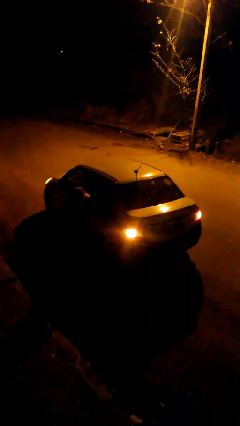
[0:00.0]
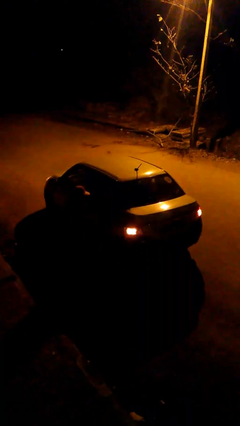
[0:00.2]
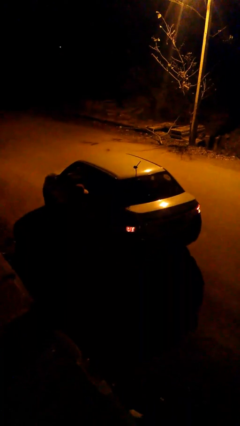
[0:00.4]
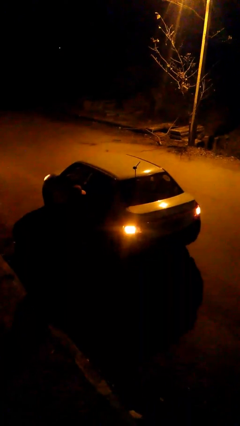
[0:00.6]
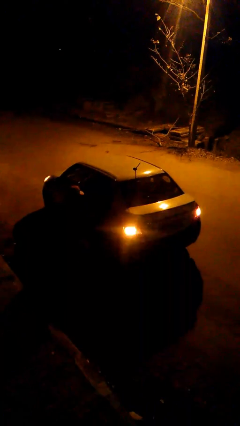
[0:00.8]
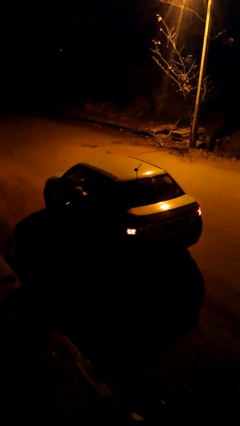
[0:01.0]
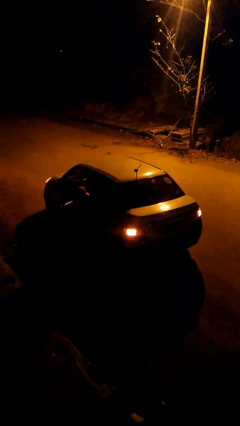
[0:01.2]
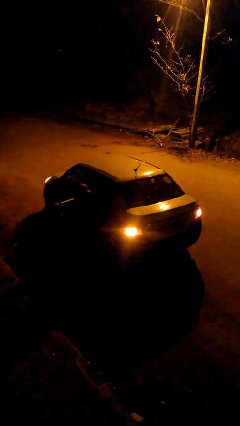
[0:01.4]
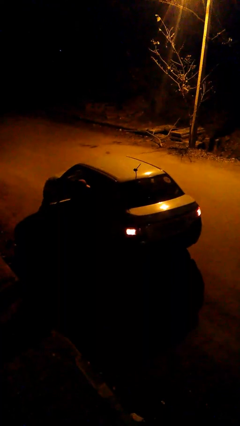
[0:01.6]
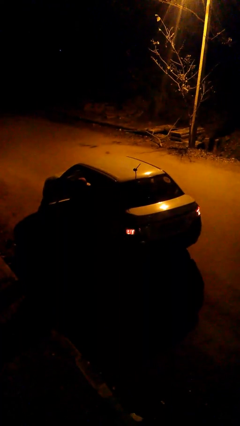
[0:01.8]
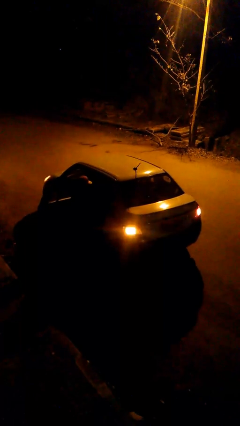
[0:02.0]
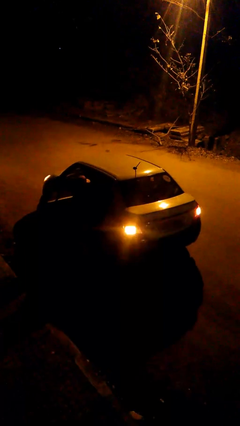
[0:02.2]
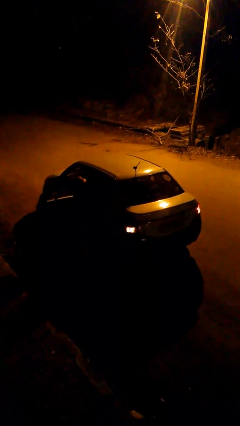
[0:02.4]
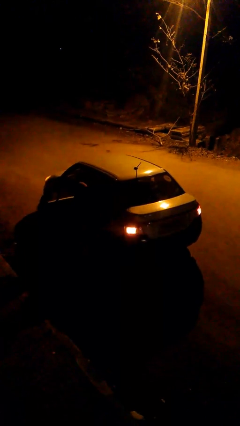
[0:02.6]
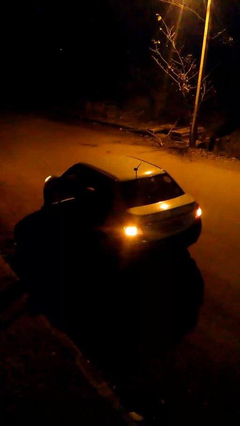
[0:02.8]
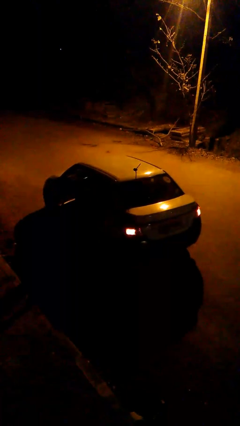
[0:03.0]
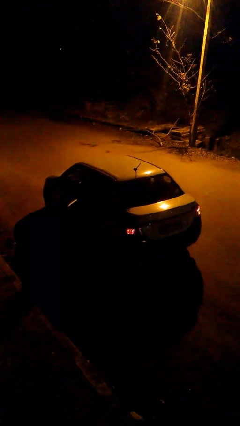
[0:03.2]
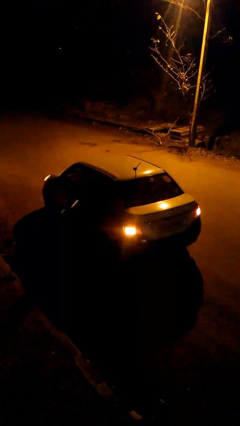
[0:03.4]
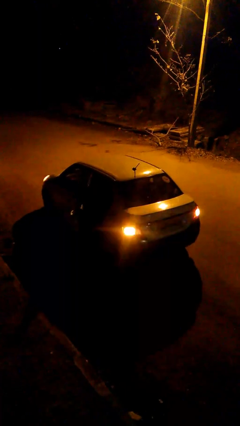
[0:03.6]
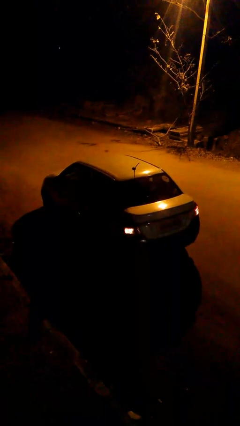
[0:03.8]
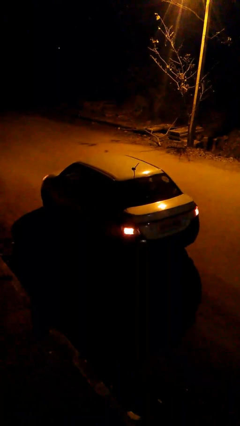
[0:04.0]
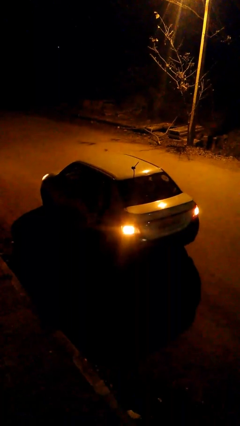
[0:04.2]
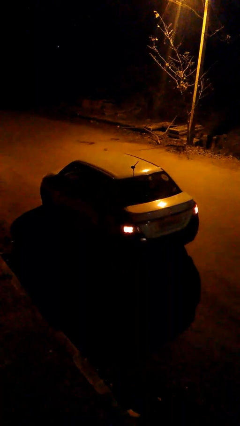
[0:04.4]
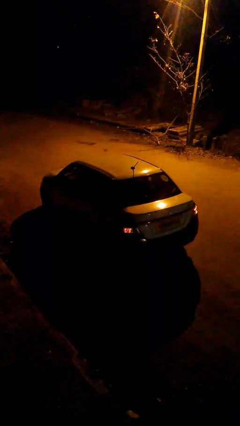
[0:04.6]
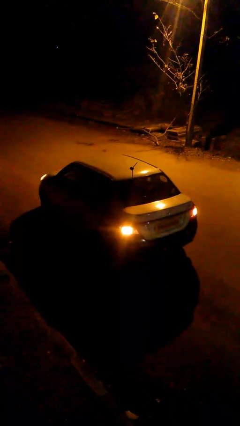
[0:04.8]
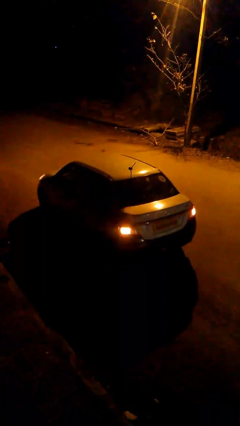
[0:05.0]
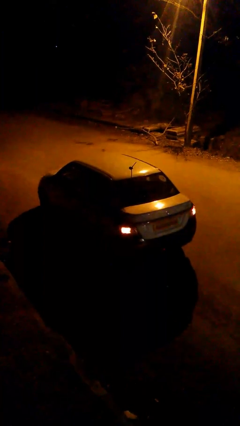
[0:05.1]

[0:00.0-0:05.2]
car picks up person

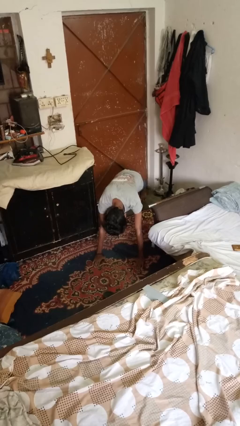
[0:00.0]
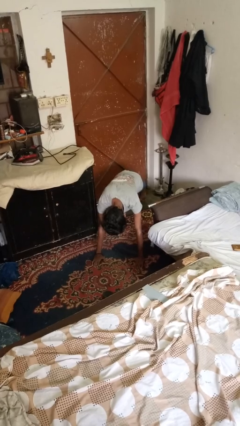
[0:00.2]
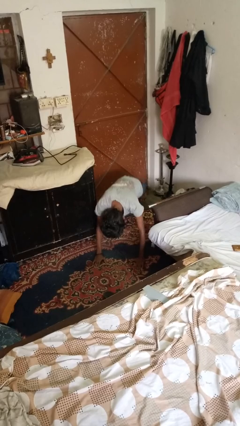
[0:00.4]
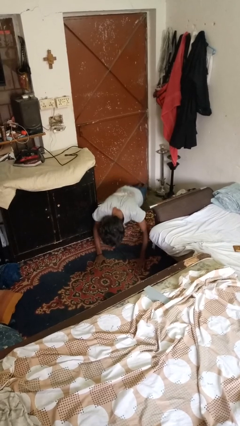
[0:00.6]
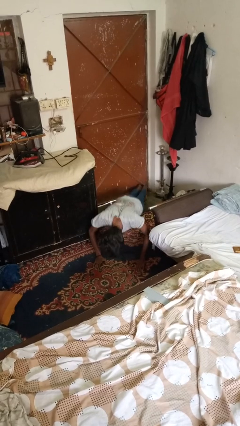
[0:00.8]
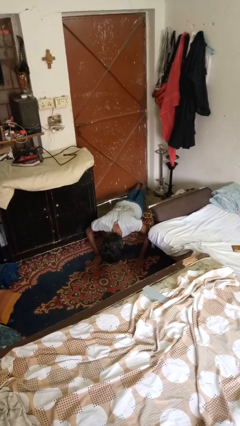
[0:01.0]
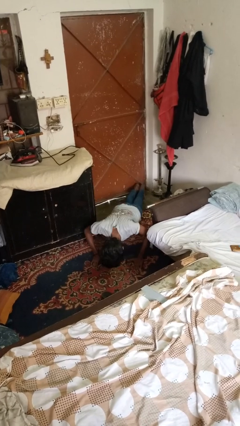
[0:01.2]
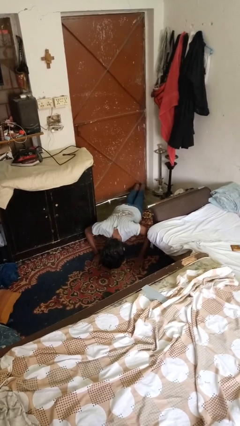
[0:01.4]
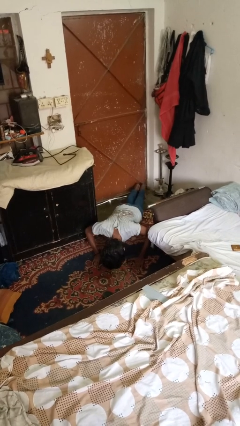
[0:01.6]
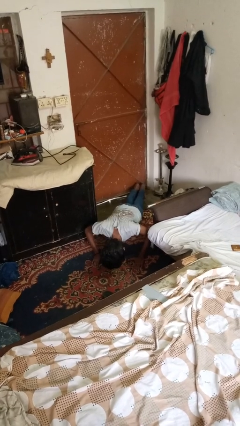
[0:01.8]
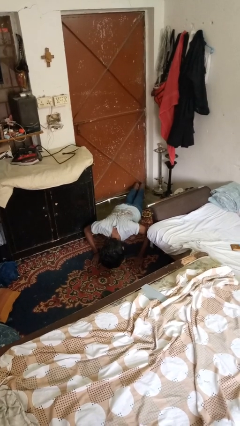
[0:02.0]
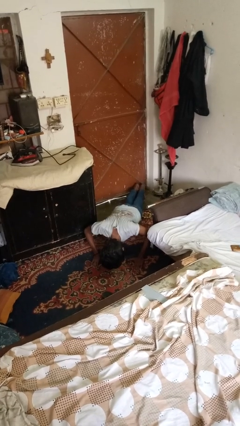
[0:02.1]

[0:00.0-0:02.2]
person exercises with pushup

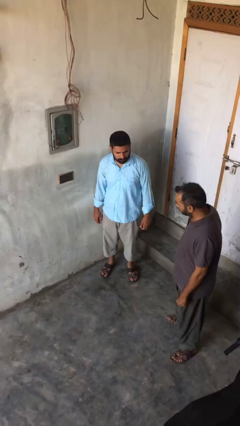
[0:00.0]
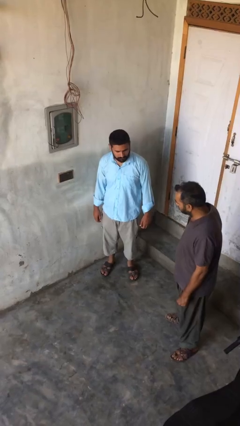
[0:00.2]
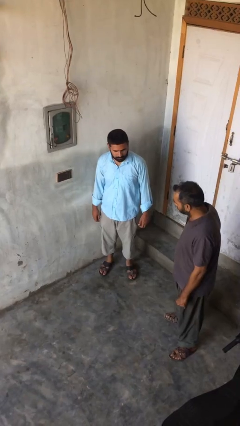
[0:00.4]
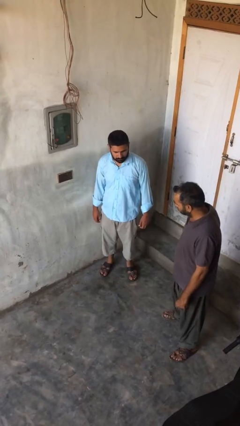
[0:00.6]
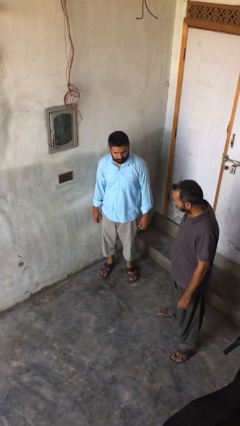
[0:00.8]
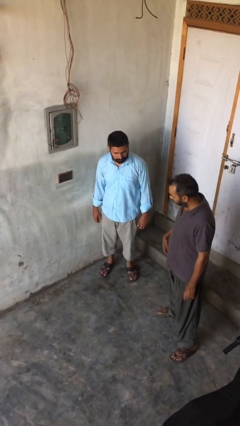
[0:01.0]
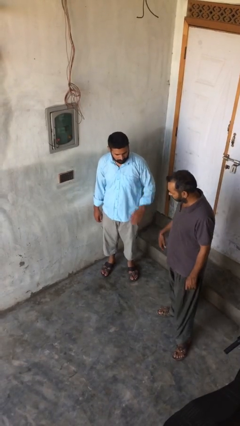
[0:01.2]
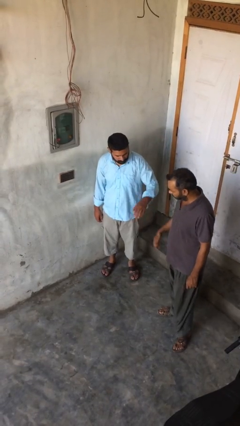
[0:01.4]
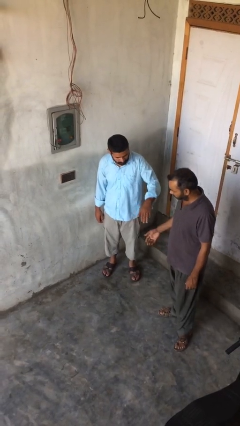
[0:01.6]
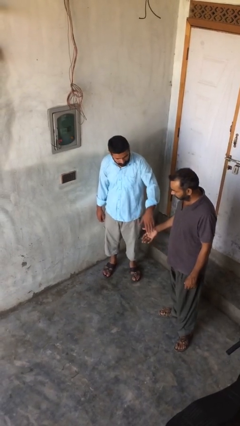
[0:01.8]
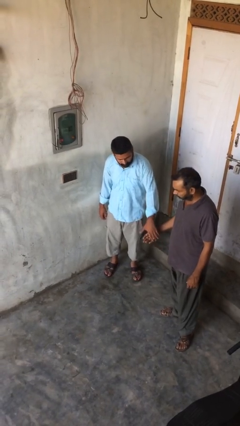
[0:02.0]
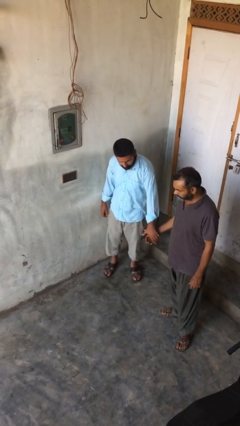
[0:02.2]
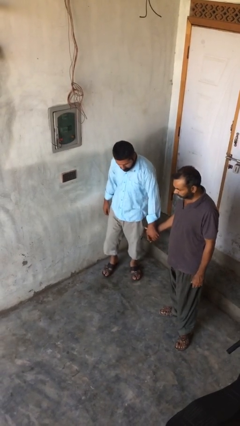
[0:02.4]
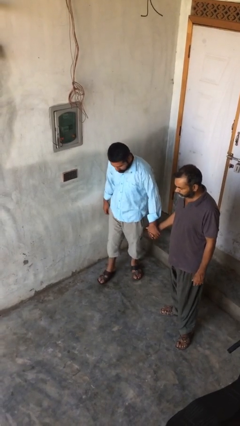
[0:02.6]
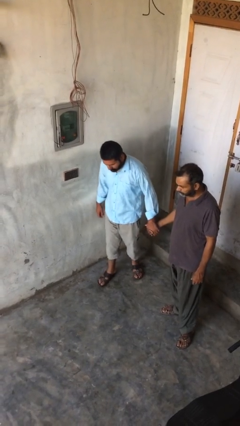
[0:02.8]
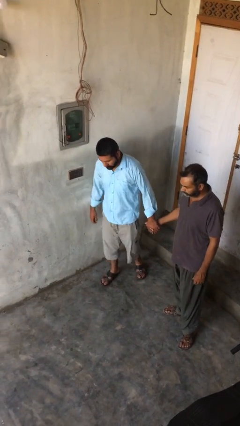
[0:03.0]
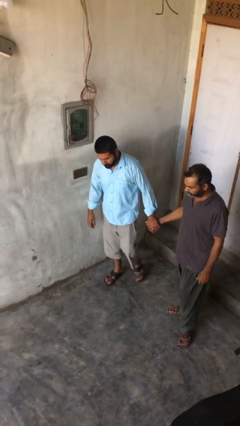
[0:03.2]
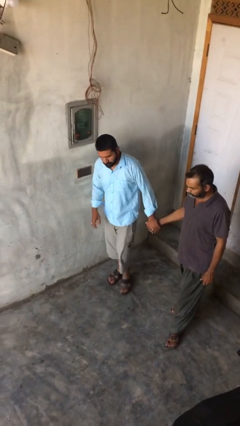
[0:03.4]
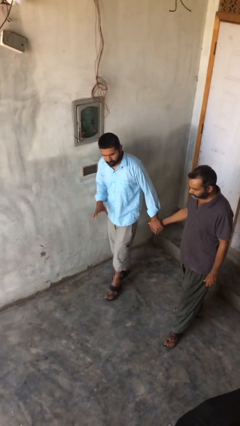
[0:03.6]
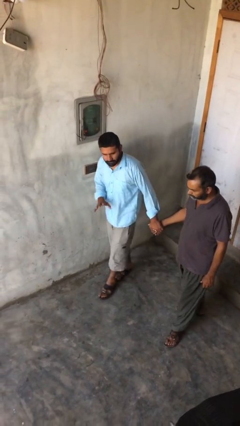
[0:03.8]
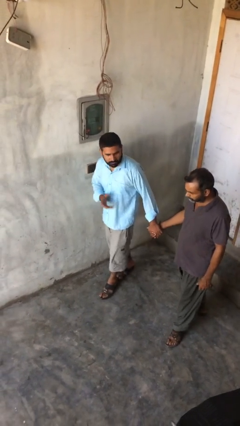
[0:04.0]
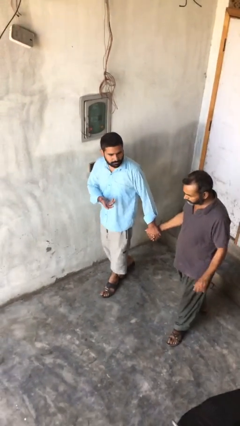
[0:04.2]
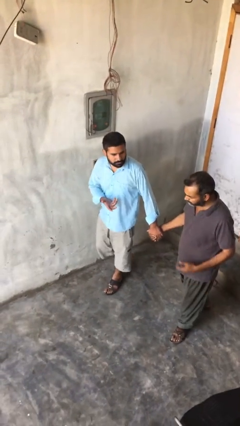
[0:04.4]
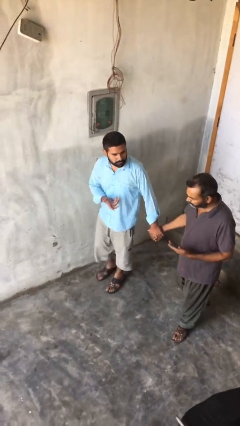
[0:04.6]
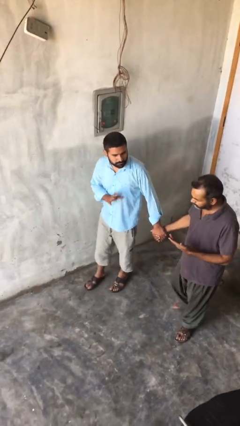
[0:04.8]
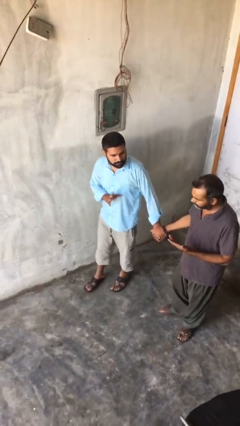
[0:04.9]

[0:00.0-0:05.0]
person holds hand

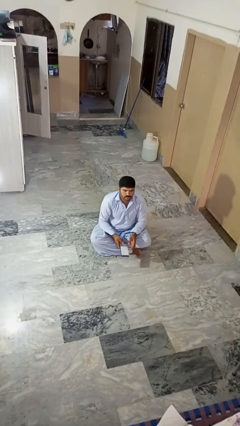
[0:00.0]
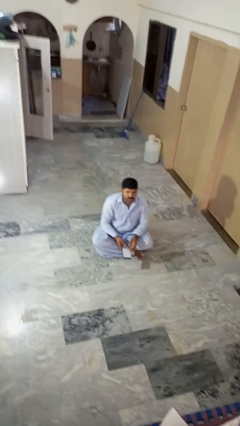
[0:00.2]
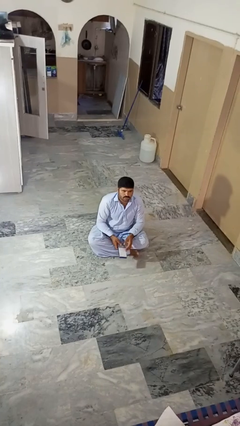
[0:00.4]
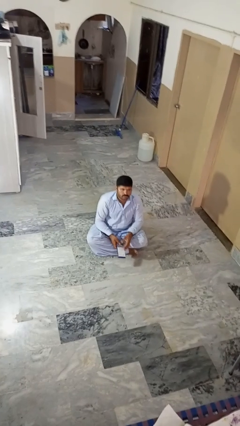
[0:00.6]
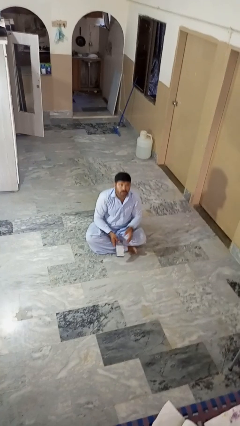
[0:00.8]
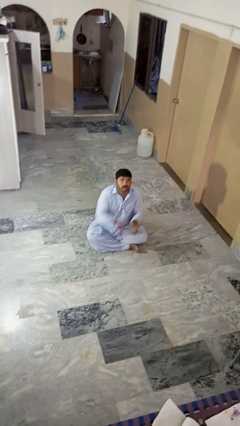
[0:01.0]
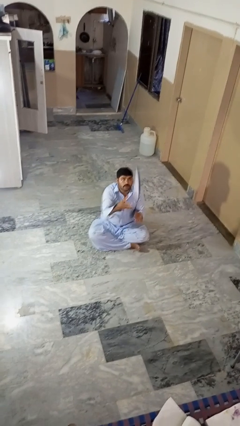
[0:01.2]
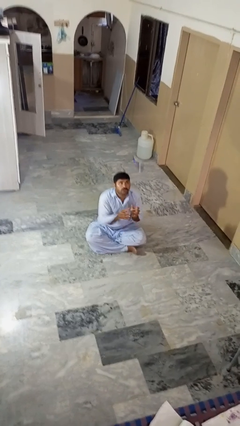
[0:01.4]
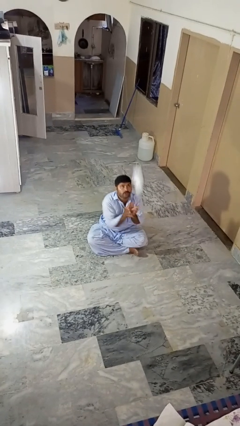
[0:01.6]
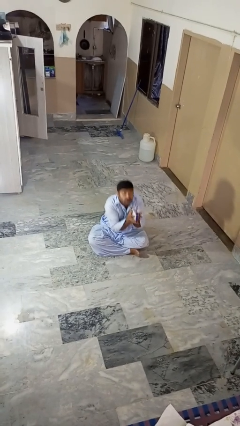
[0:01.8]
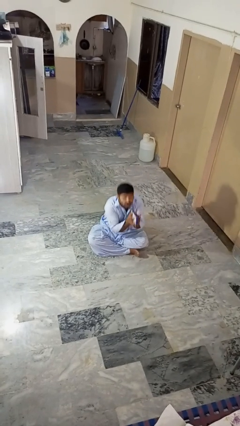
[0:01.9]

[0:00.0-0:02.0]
person drops object

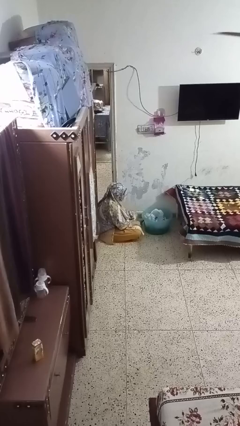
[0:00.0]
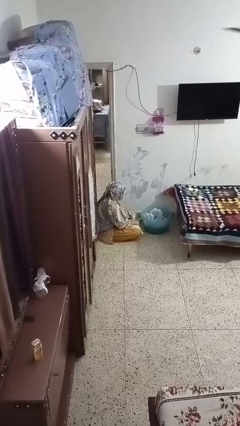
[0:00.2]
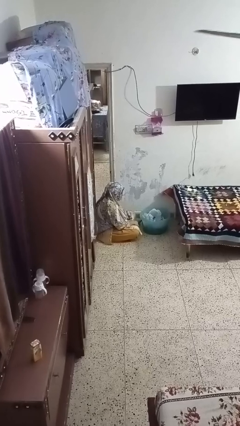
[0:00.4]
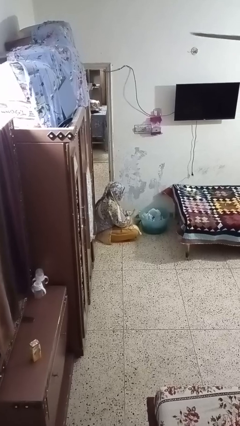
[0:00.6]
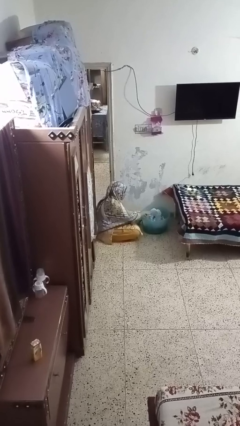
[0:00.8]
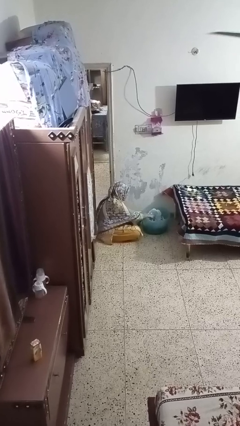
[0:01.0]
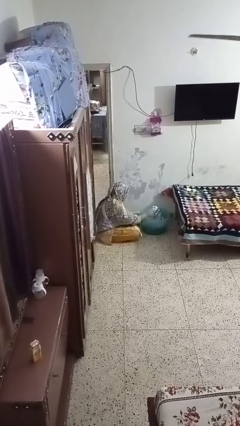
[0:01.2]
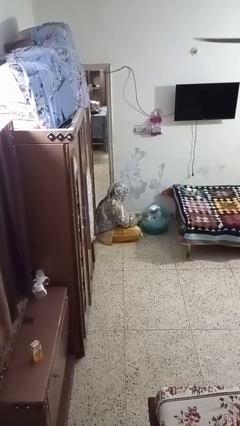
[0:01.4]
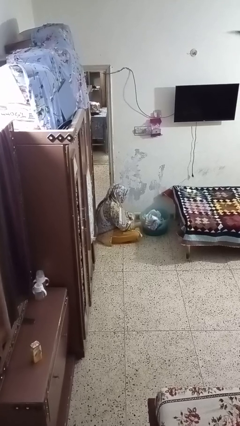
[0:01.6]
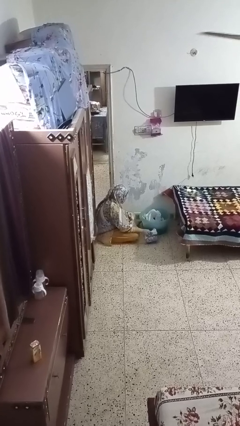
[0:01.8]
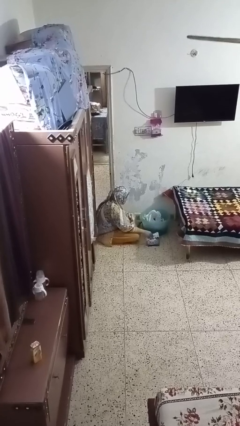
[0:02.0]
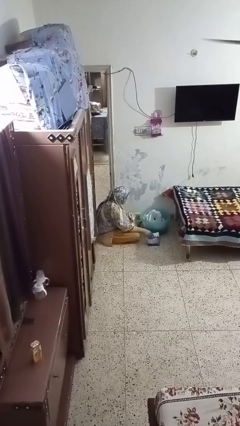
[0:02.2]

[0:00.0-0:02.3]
person takes object from basket

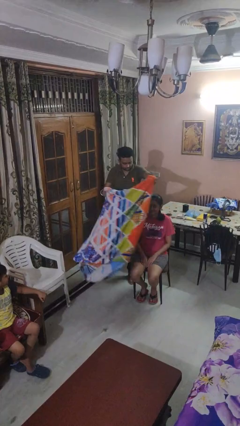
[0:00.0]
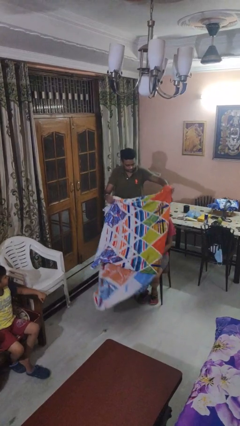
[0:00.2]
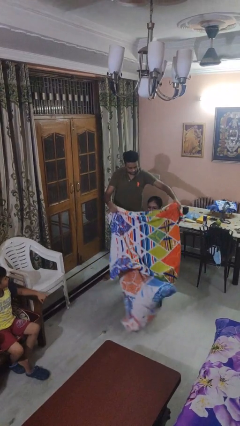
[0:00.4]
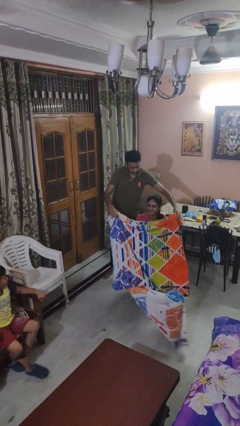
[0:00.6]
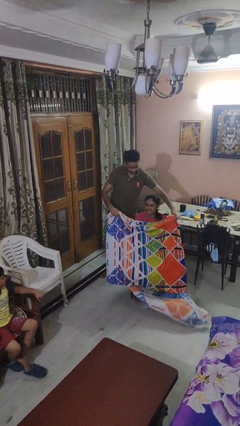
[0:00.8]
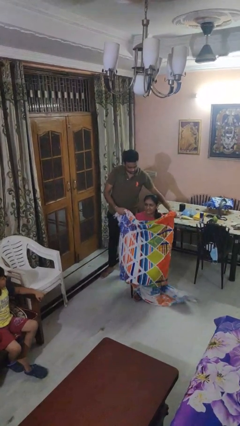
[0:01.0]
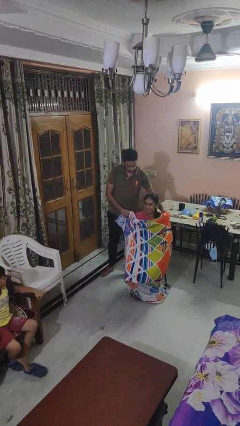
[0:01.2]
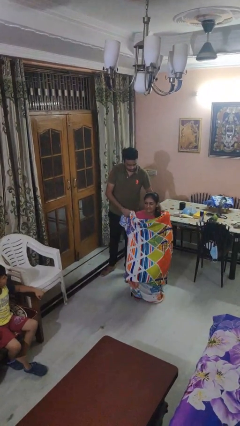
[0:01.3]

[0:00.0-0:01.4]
person covers friend with blanket
